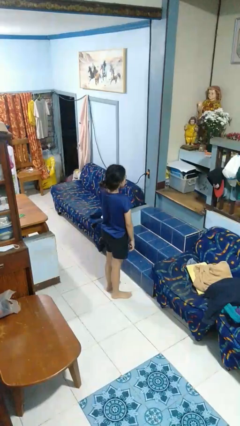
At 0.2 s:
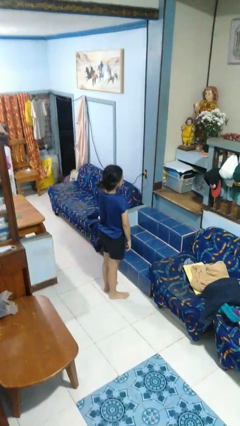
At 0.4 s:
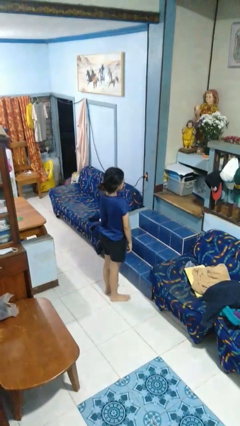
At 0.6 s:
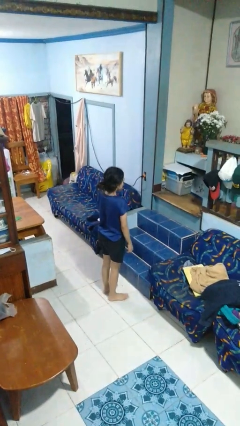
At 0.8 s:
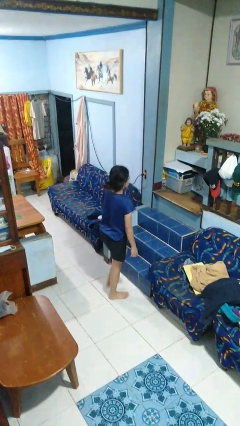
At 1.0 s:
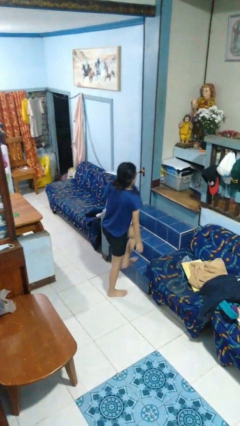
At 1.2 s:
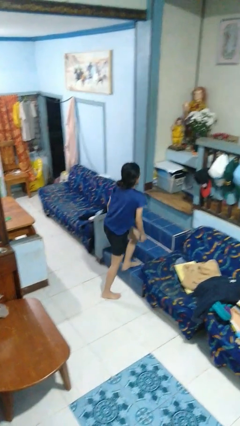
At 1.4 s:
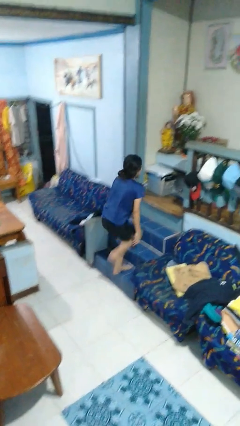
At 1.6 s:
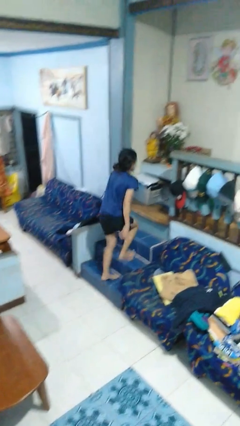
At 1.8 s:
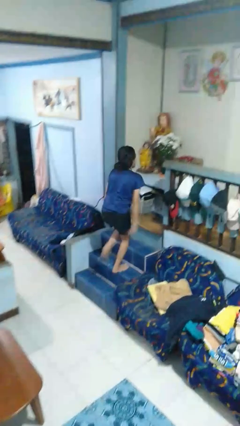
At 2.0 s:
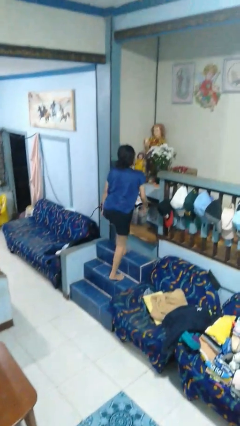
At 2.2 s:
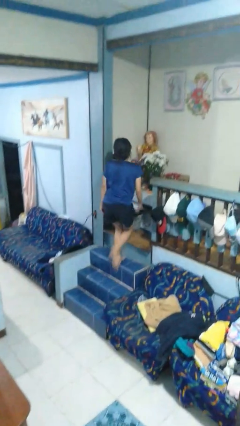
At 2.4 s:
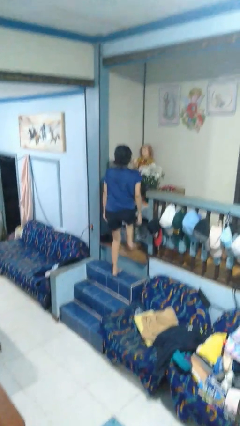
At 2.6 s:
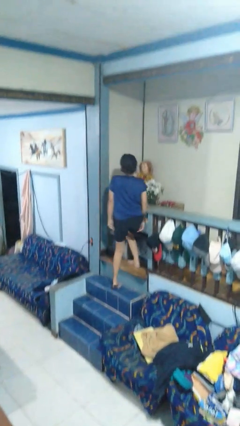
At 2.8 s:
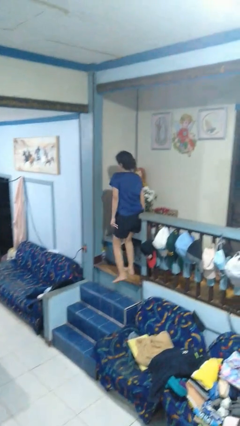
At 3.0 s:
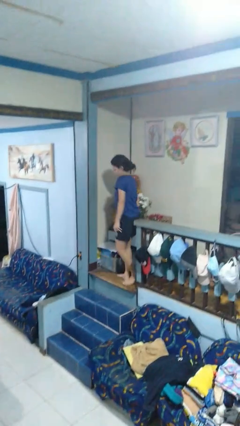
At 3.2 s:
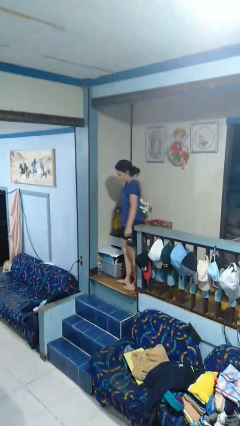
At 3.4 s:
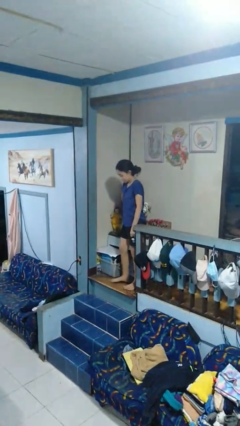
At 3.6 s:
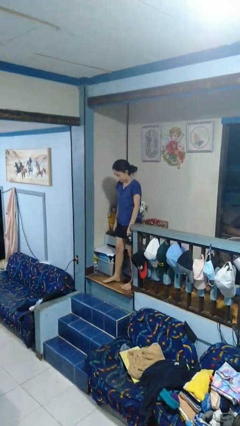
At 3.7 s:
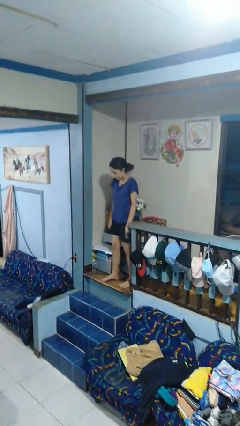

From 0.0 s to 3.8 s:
person climbs up stairs

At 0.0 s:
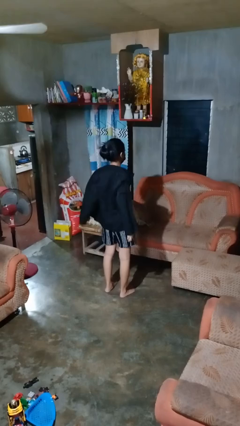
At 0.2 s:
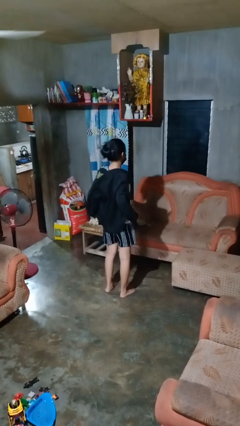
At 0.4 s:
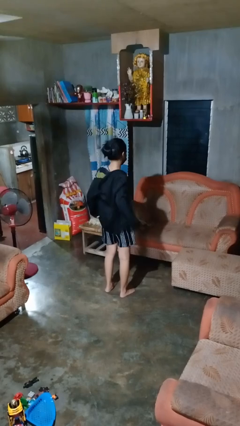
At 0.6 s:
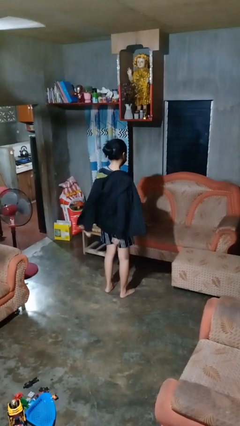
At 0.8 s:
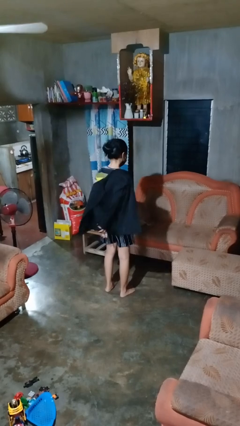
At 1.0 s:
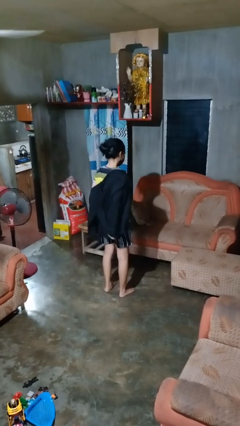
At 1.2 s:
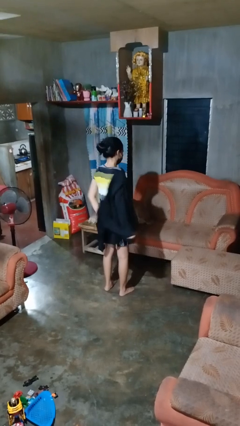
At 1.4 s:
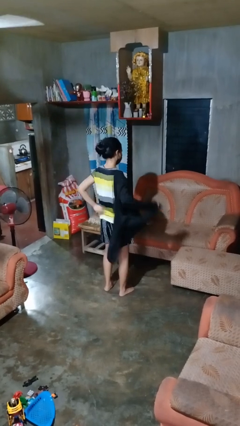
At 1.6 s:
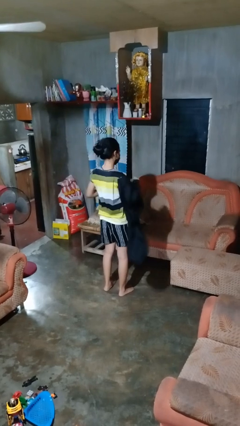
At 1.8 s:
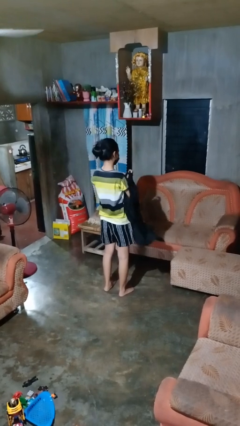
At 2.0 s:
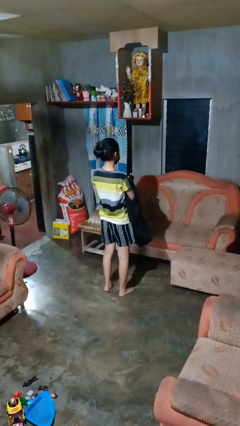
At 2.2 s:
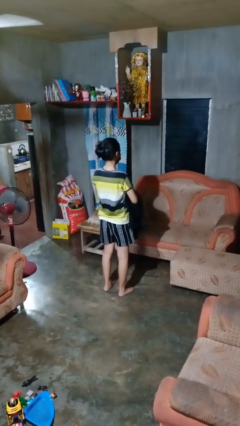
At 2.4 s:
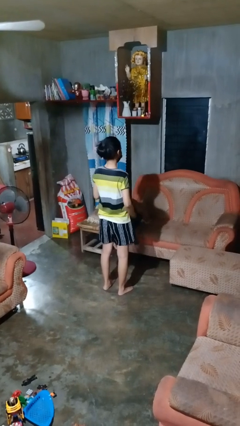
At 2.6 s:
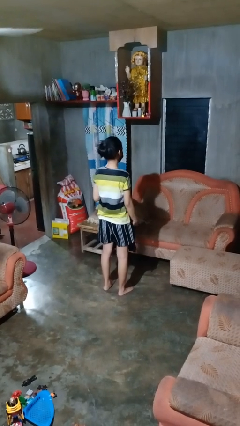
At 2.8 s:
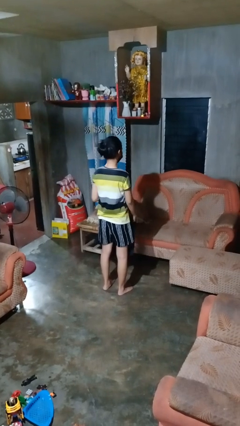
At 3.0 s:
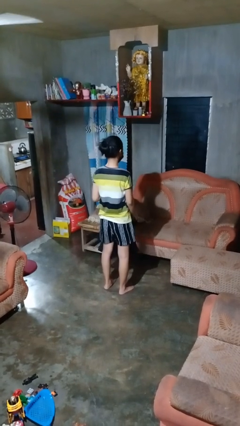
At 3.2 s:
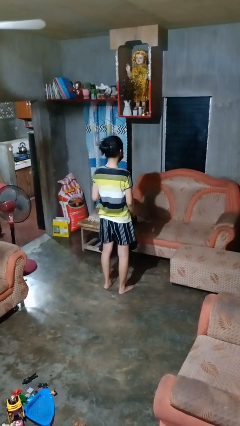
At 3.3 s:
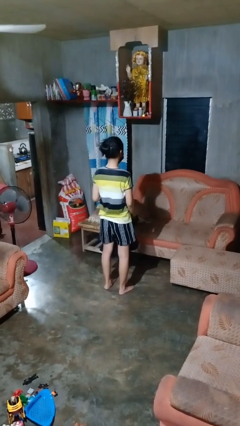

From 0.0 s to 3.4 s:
person takes off shirt

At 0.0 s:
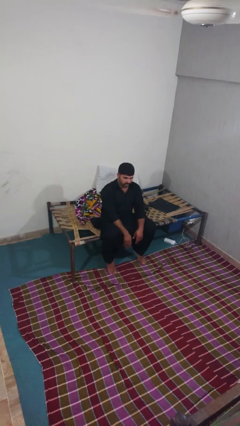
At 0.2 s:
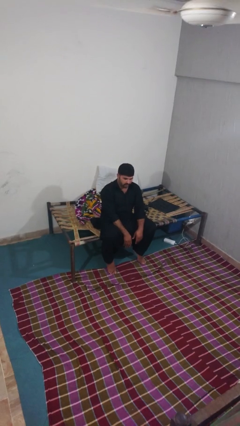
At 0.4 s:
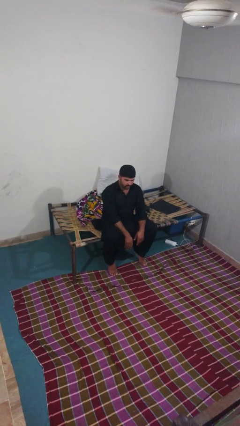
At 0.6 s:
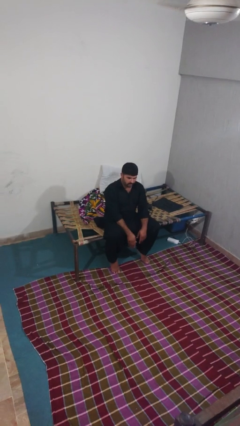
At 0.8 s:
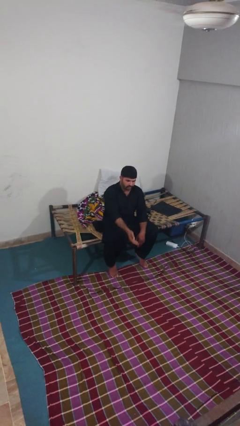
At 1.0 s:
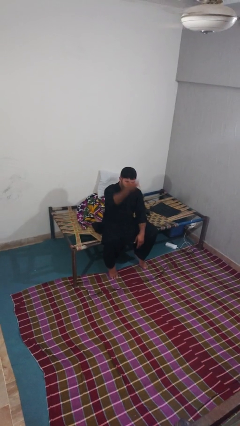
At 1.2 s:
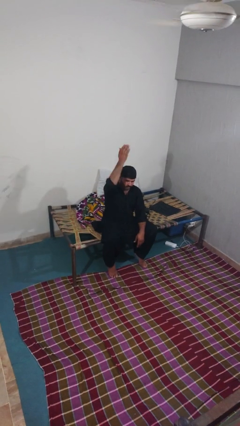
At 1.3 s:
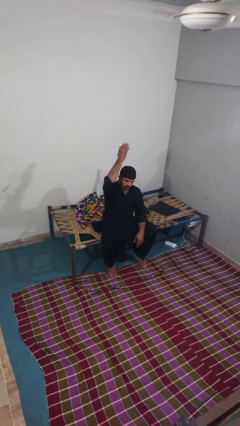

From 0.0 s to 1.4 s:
person gestures swipe up

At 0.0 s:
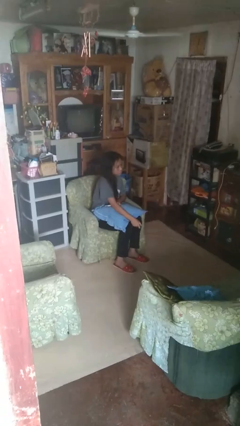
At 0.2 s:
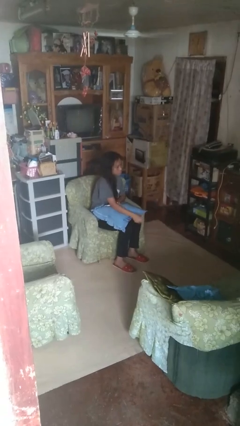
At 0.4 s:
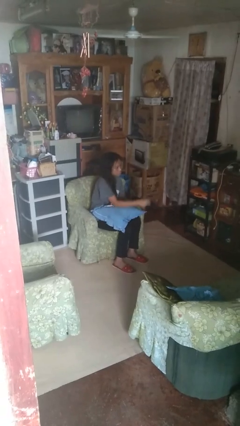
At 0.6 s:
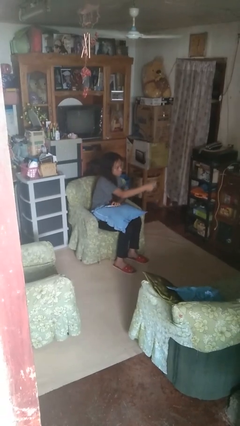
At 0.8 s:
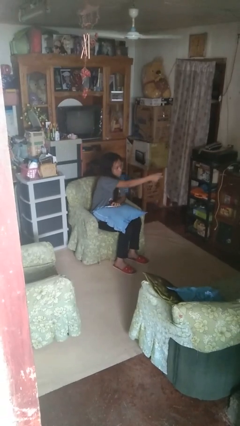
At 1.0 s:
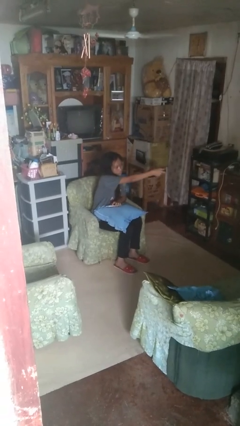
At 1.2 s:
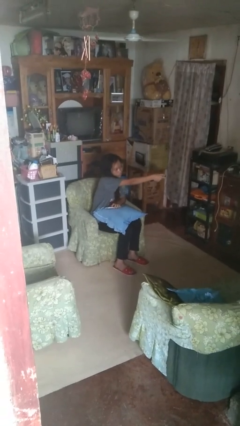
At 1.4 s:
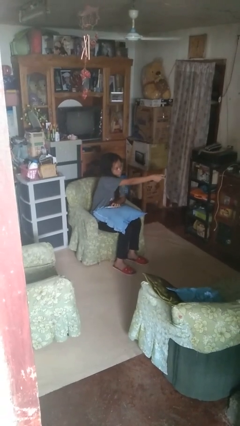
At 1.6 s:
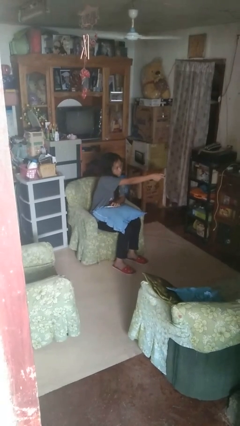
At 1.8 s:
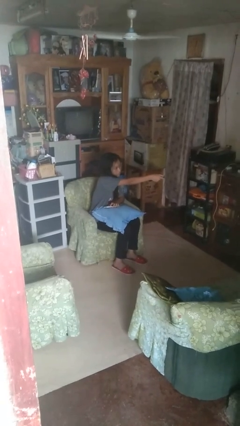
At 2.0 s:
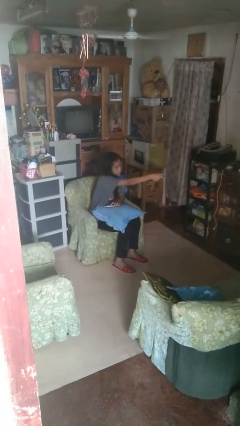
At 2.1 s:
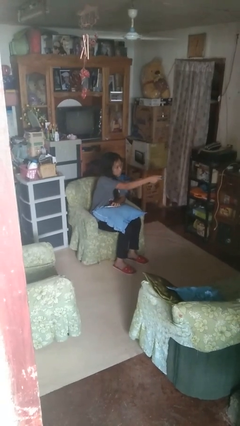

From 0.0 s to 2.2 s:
person uses television remote

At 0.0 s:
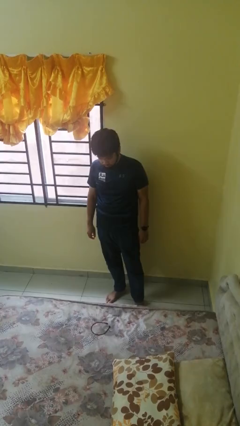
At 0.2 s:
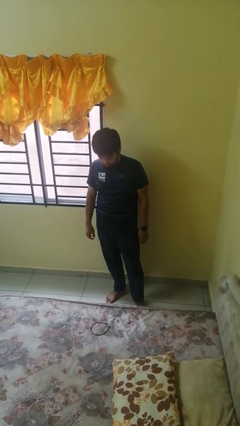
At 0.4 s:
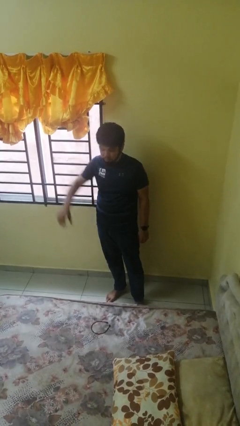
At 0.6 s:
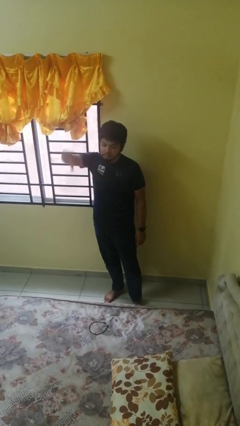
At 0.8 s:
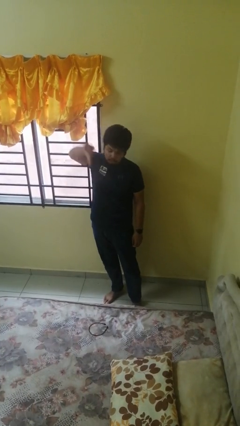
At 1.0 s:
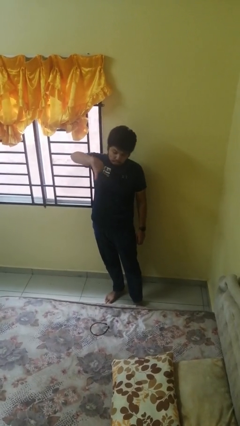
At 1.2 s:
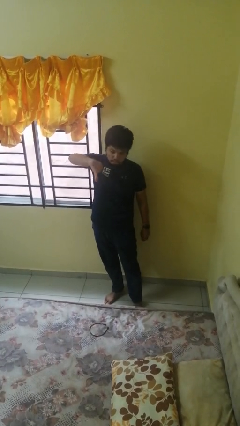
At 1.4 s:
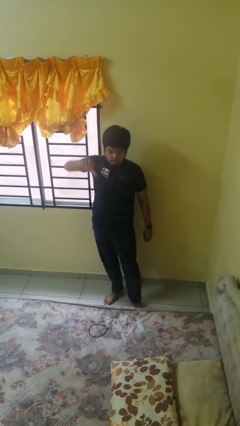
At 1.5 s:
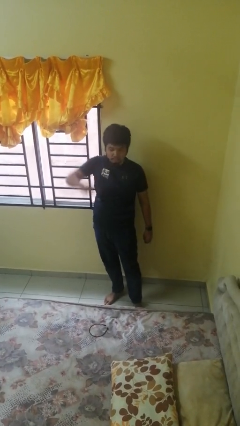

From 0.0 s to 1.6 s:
person gestures thumbs down

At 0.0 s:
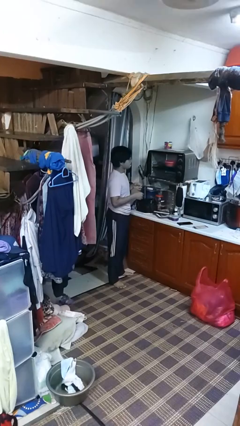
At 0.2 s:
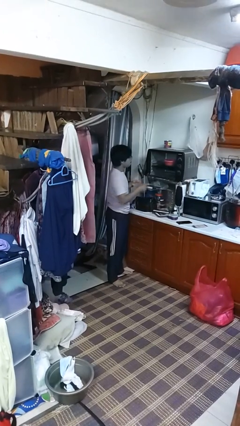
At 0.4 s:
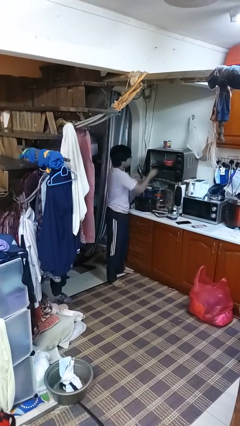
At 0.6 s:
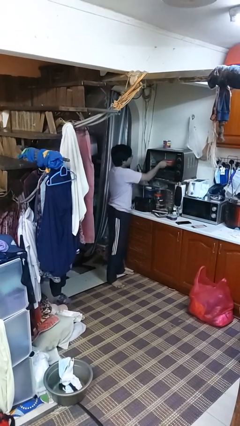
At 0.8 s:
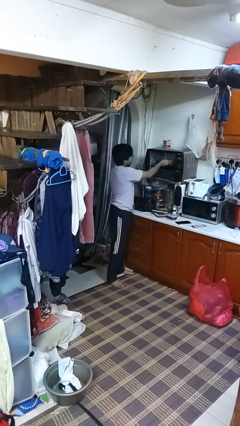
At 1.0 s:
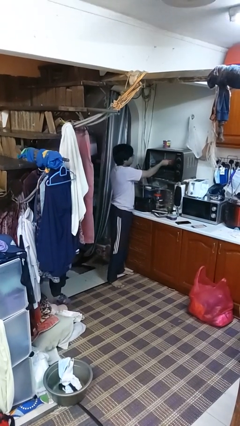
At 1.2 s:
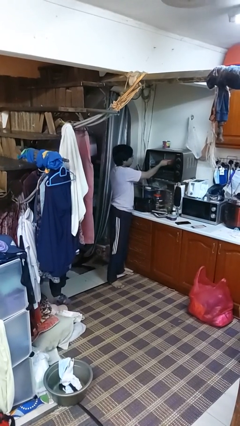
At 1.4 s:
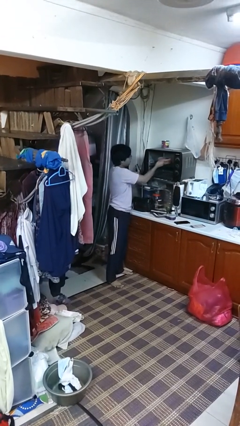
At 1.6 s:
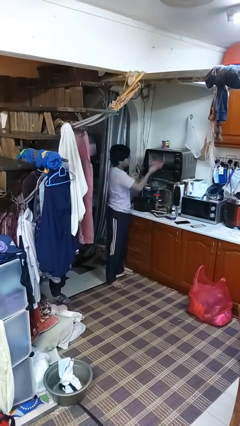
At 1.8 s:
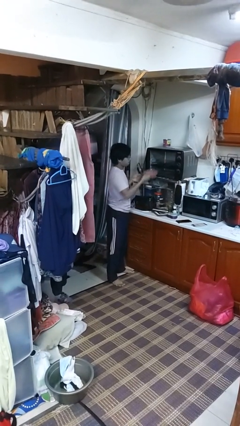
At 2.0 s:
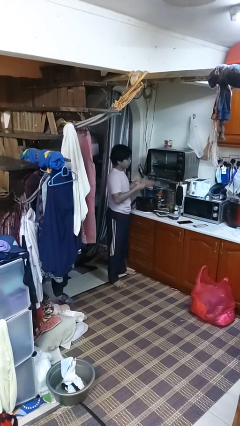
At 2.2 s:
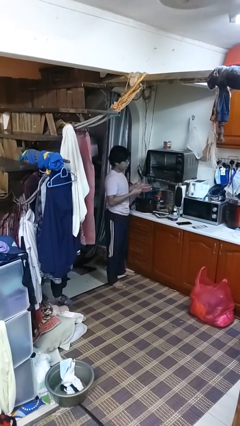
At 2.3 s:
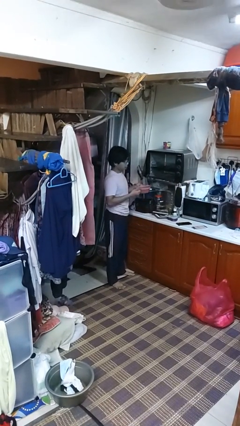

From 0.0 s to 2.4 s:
person takes object from oven

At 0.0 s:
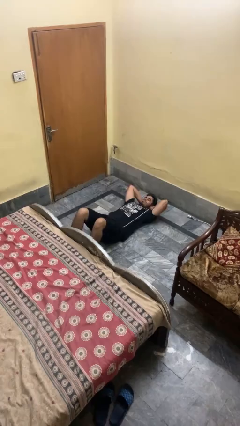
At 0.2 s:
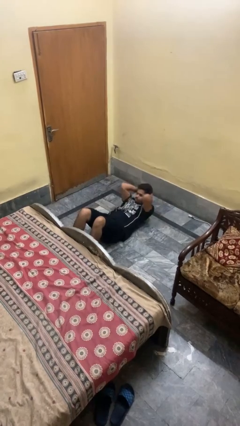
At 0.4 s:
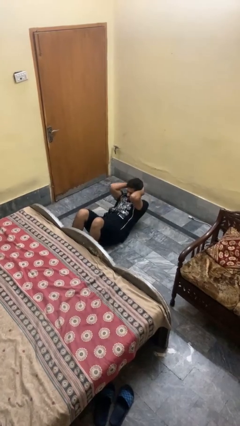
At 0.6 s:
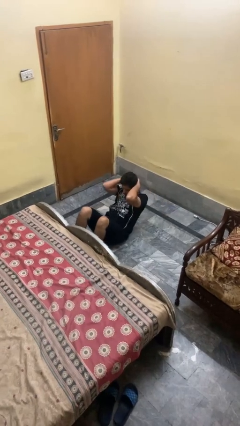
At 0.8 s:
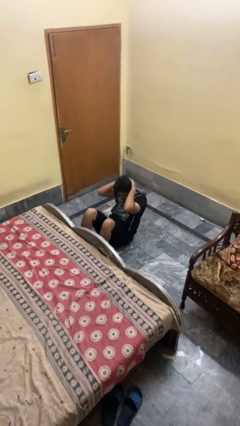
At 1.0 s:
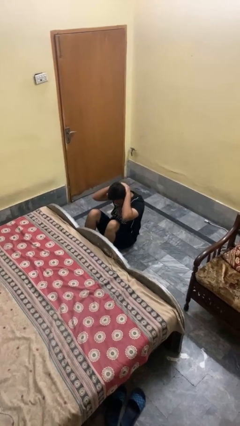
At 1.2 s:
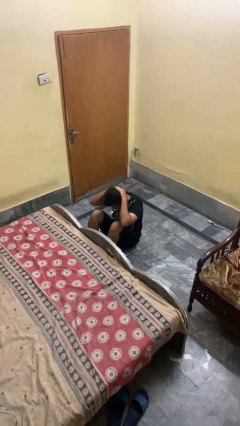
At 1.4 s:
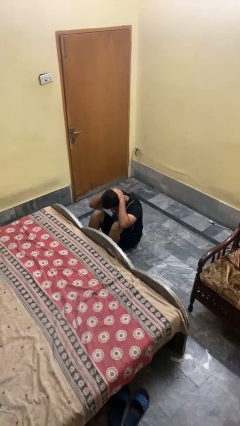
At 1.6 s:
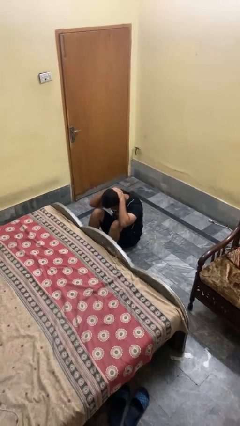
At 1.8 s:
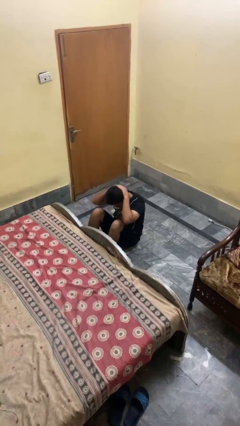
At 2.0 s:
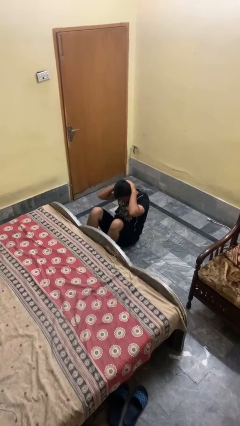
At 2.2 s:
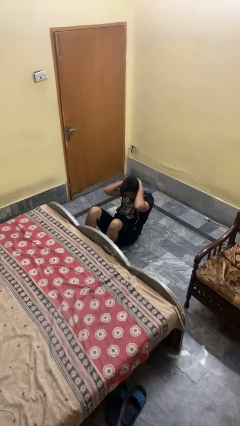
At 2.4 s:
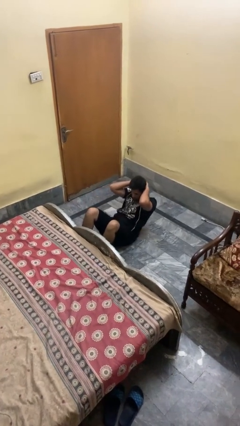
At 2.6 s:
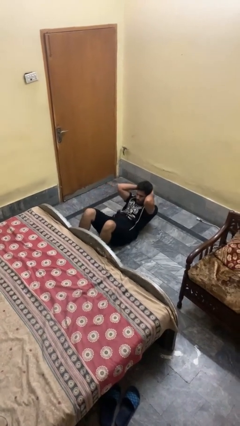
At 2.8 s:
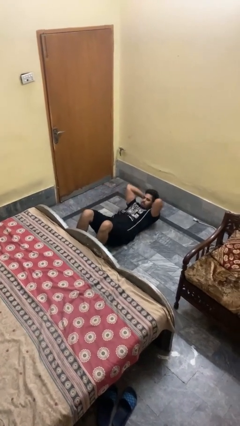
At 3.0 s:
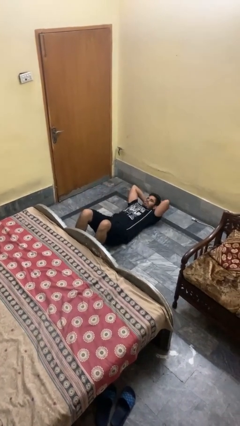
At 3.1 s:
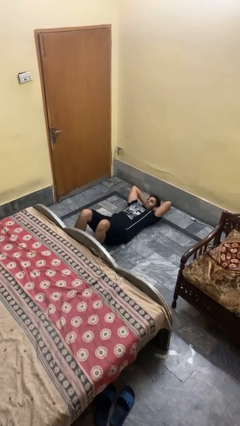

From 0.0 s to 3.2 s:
person exercises with situp
